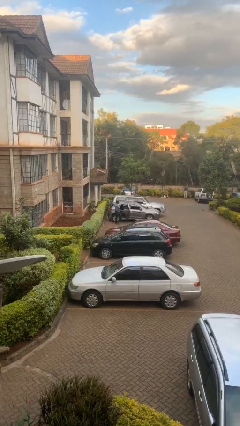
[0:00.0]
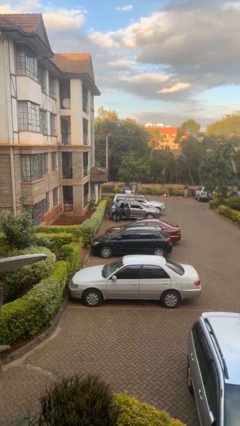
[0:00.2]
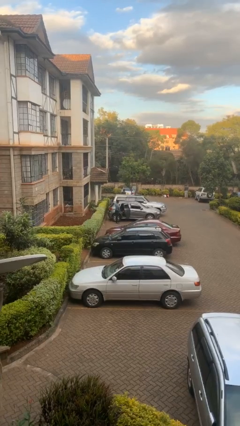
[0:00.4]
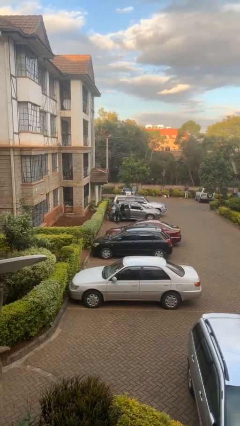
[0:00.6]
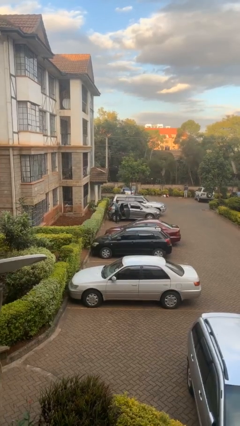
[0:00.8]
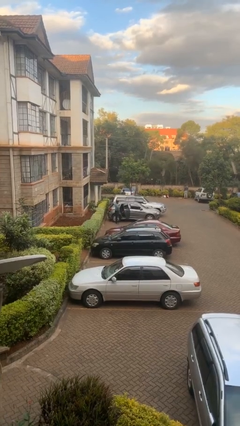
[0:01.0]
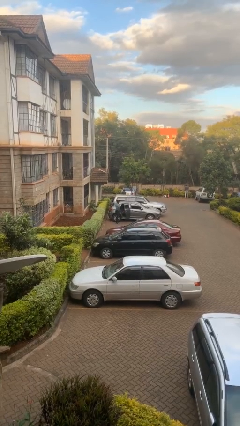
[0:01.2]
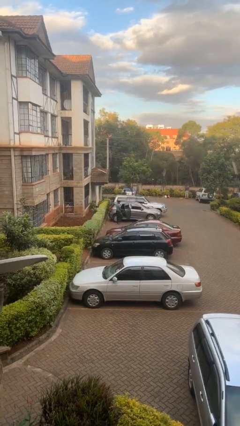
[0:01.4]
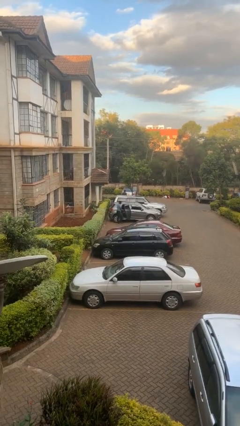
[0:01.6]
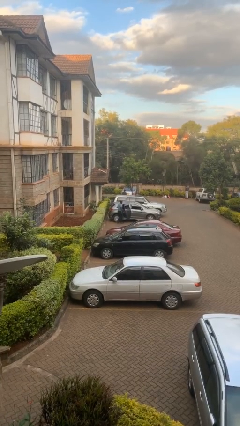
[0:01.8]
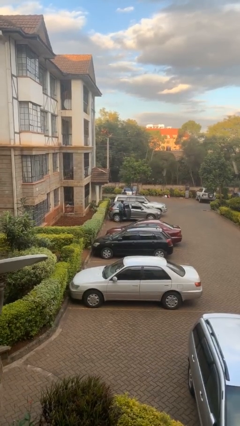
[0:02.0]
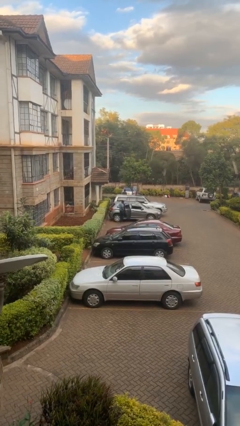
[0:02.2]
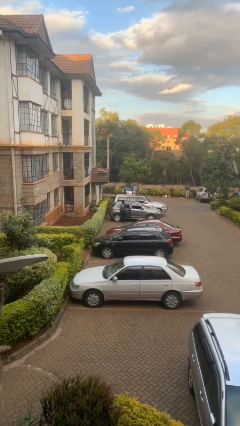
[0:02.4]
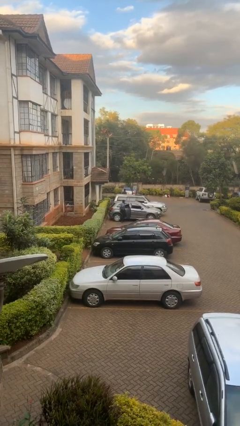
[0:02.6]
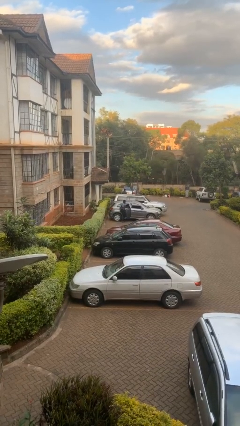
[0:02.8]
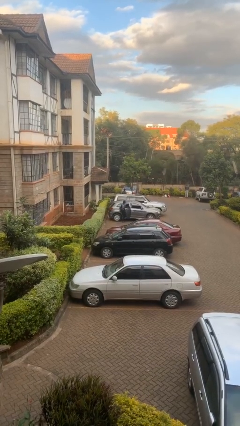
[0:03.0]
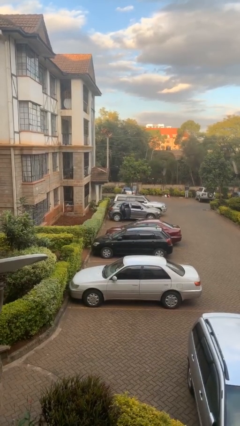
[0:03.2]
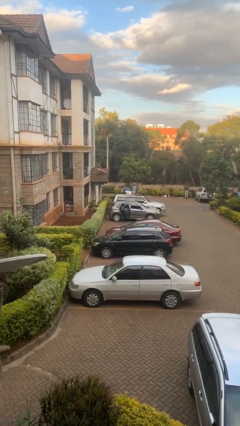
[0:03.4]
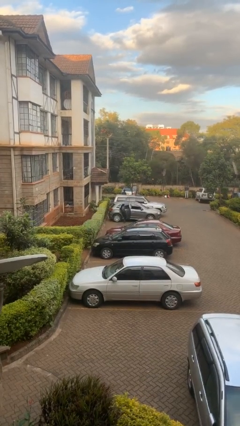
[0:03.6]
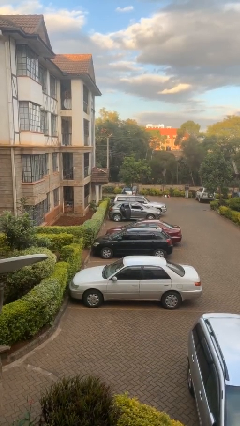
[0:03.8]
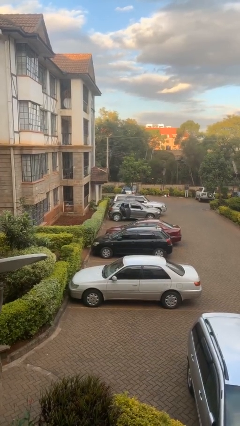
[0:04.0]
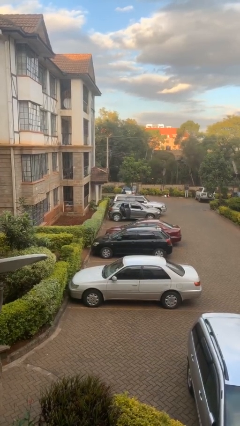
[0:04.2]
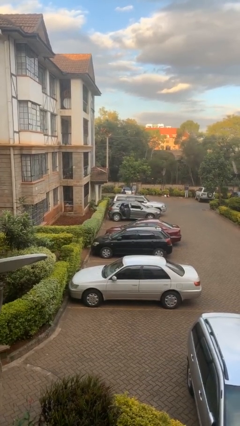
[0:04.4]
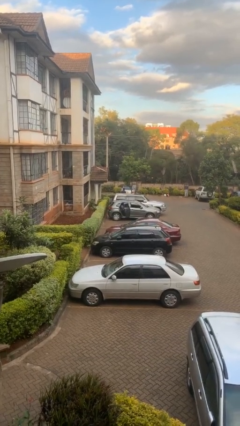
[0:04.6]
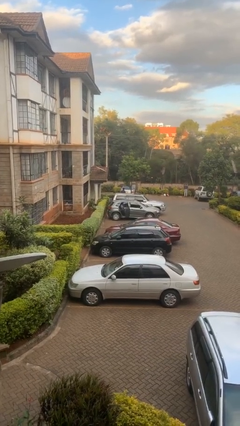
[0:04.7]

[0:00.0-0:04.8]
person enters car

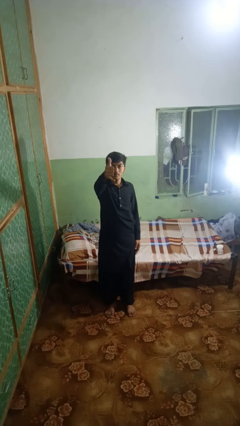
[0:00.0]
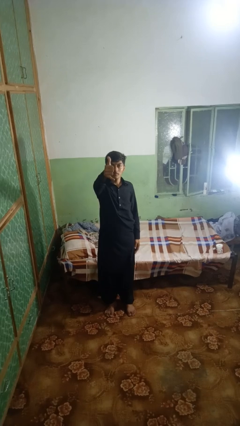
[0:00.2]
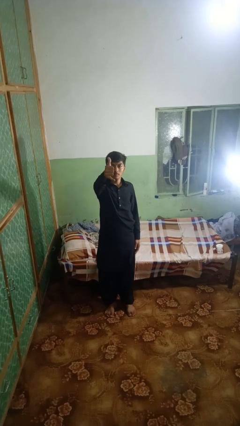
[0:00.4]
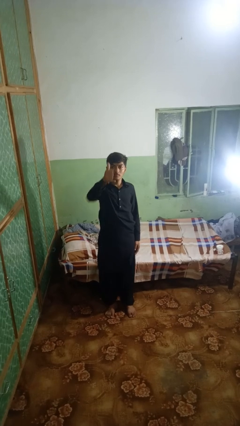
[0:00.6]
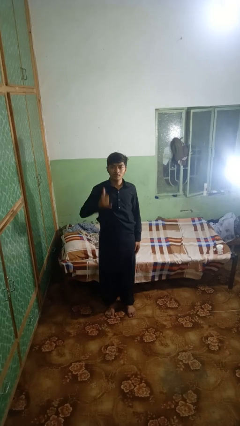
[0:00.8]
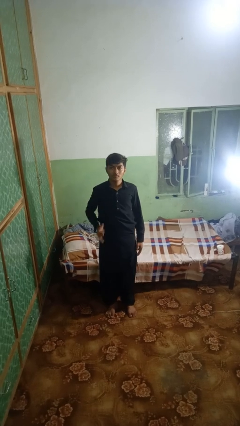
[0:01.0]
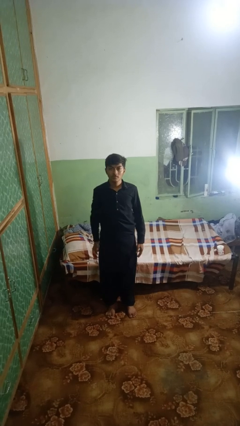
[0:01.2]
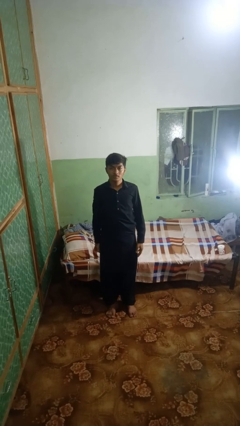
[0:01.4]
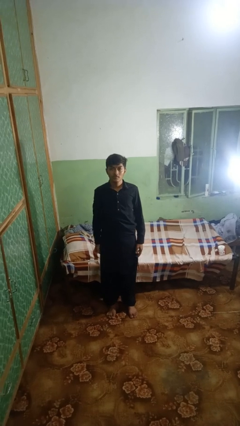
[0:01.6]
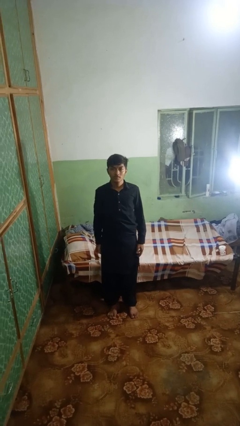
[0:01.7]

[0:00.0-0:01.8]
person gestures hang loose

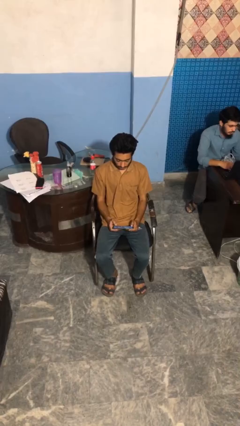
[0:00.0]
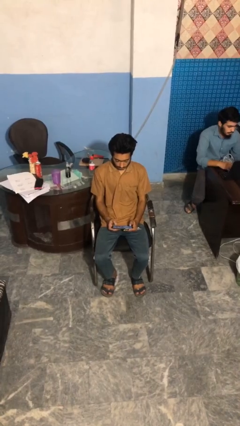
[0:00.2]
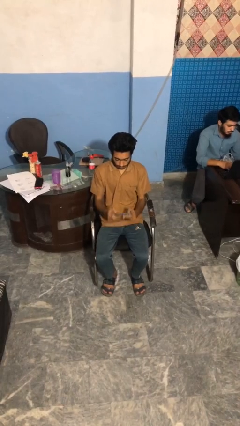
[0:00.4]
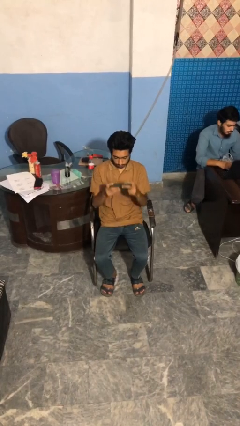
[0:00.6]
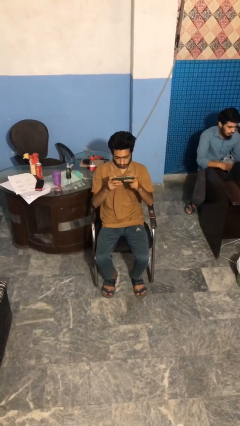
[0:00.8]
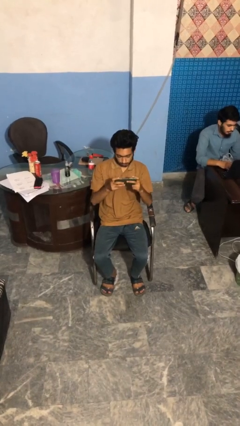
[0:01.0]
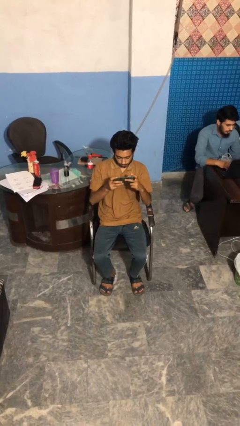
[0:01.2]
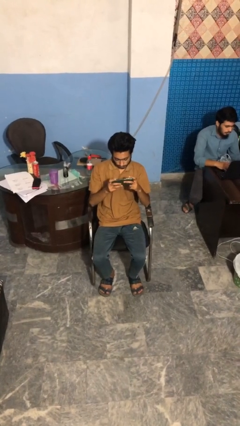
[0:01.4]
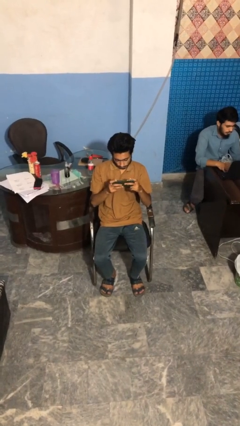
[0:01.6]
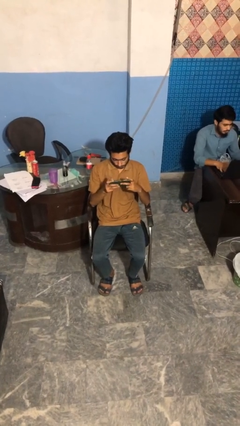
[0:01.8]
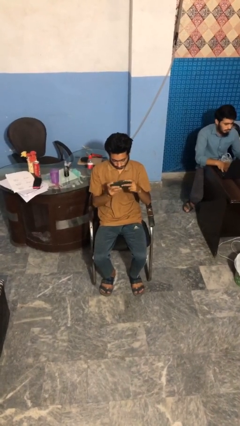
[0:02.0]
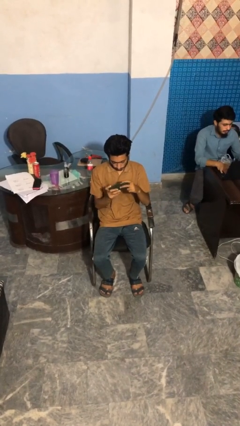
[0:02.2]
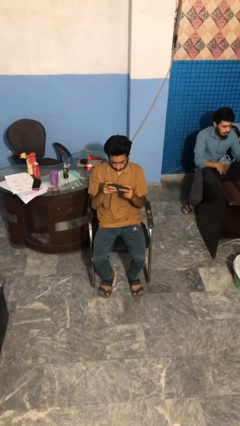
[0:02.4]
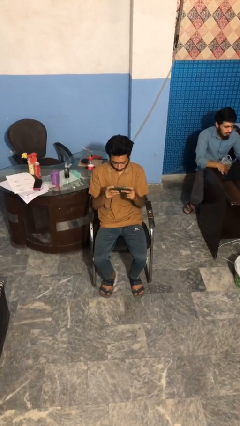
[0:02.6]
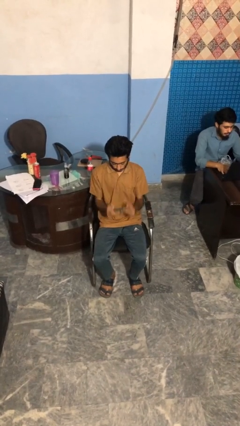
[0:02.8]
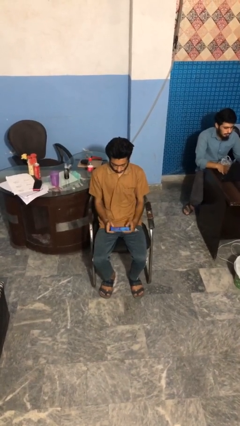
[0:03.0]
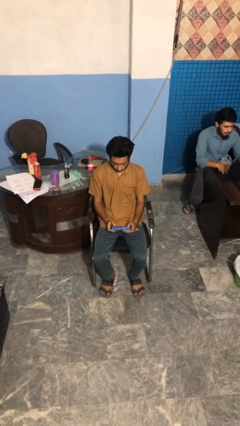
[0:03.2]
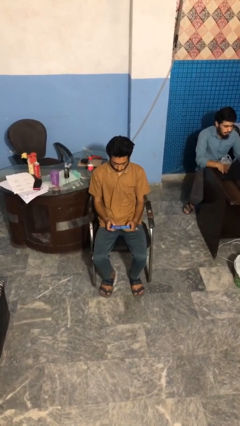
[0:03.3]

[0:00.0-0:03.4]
person interacts with handheld game

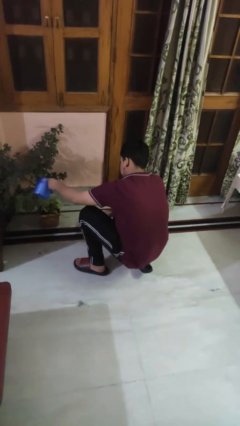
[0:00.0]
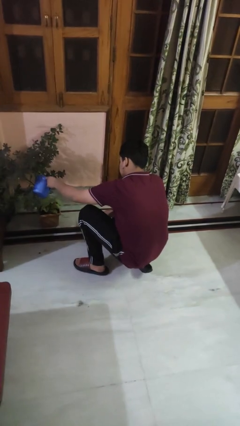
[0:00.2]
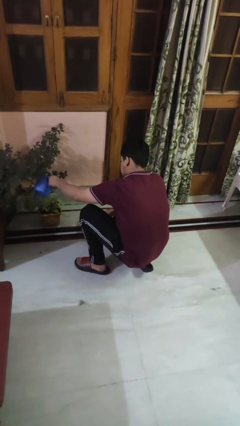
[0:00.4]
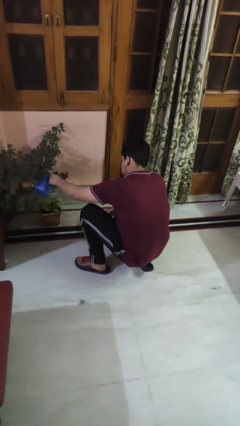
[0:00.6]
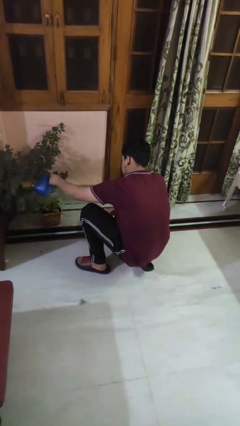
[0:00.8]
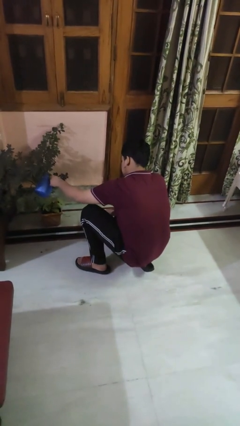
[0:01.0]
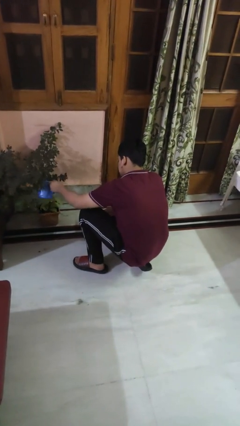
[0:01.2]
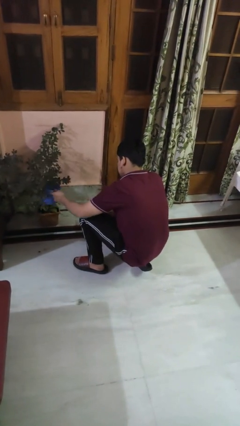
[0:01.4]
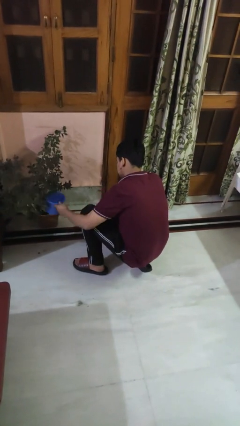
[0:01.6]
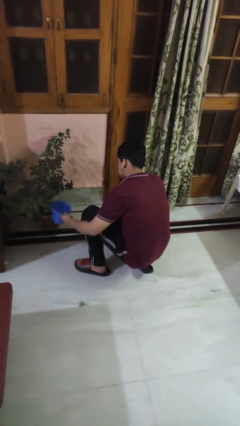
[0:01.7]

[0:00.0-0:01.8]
person waters houseplant

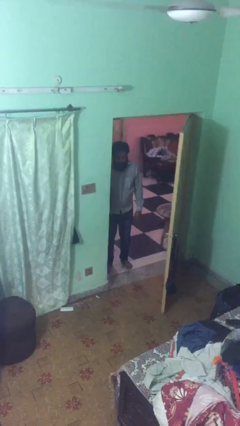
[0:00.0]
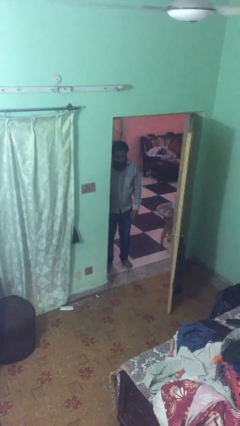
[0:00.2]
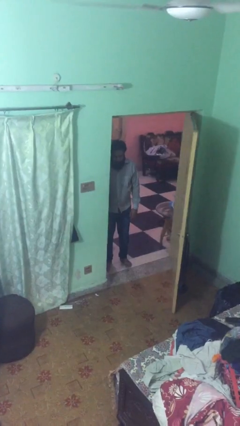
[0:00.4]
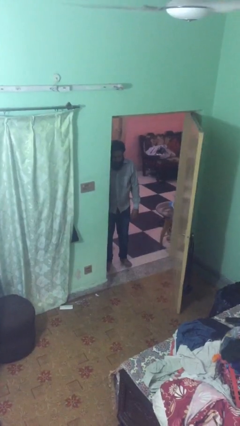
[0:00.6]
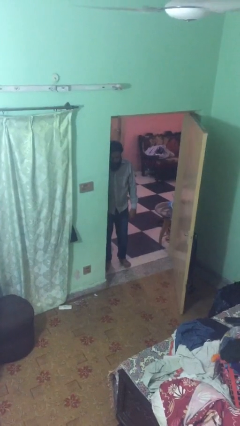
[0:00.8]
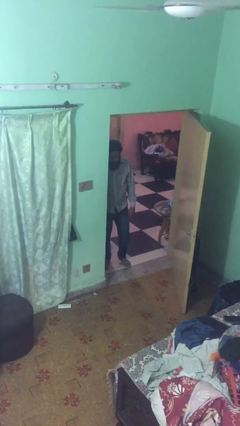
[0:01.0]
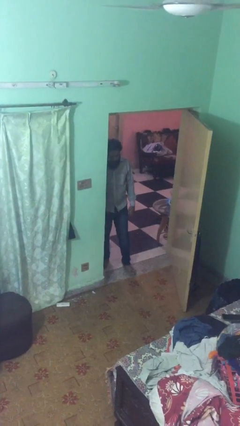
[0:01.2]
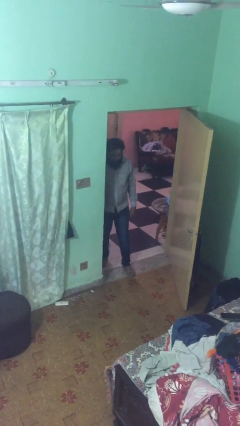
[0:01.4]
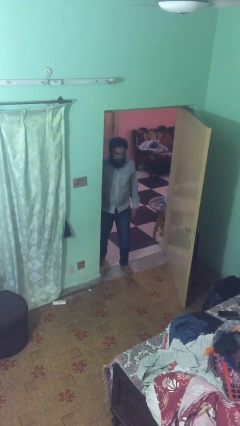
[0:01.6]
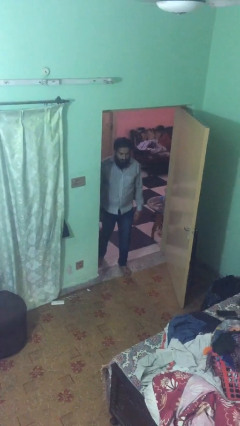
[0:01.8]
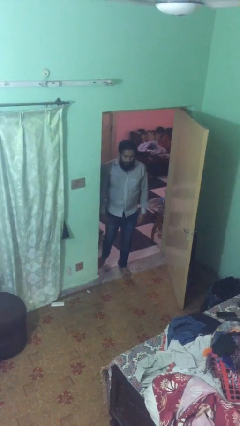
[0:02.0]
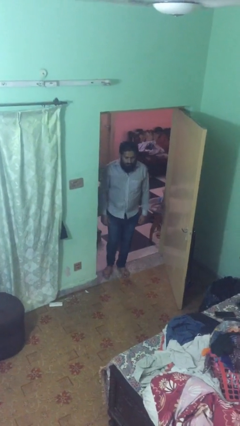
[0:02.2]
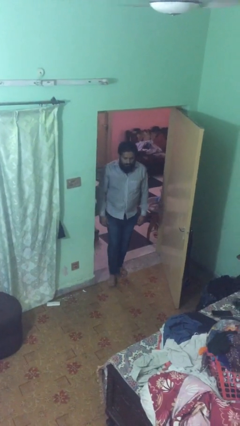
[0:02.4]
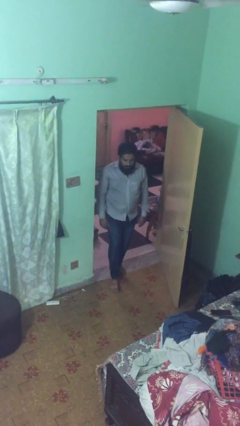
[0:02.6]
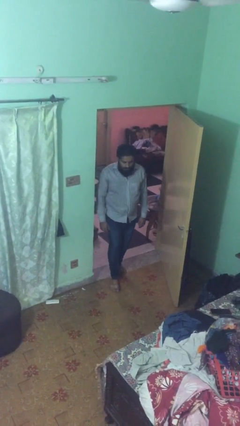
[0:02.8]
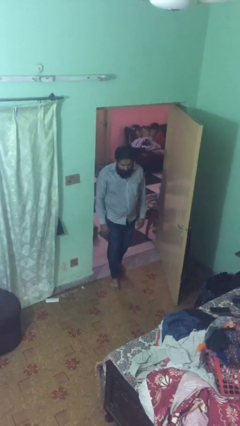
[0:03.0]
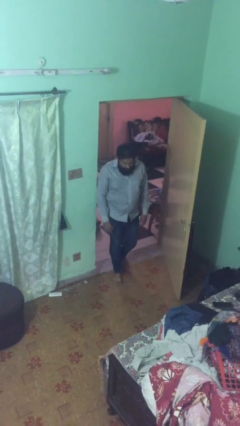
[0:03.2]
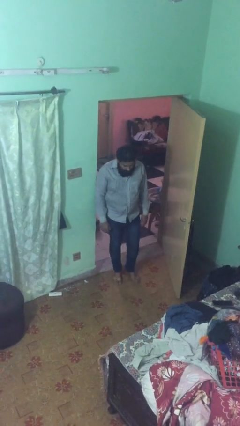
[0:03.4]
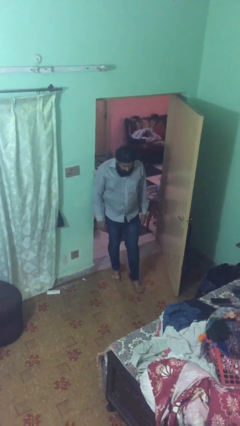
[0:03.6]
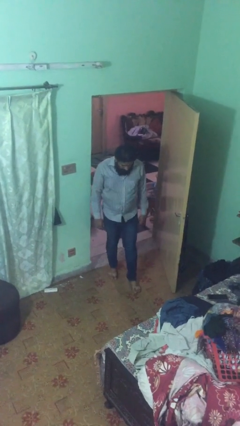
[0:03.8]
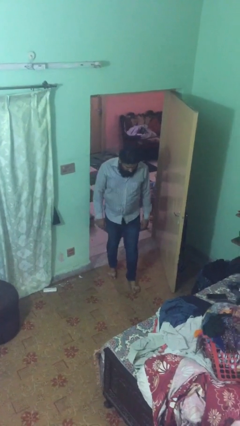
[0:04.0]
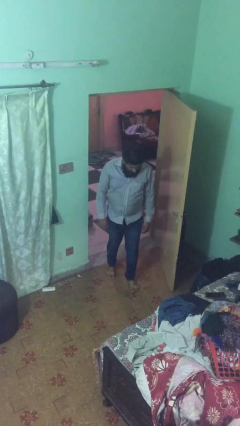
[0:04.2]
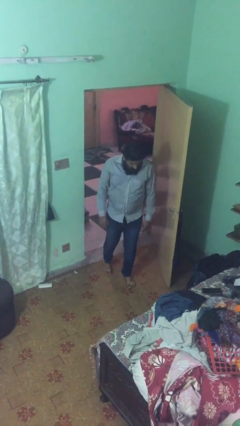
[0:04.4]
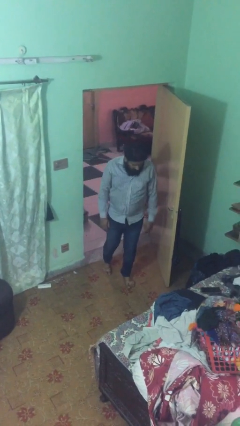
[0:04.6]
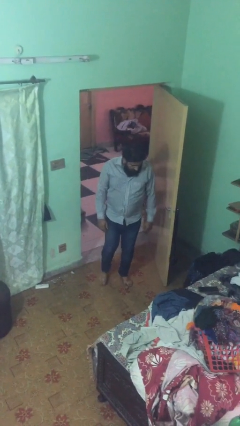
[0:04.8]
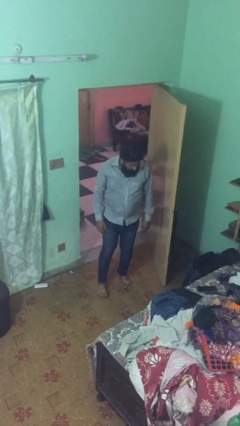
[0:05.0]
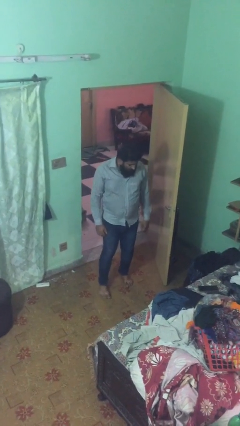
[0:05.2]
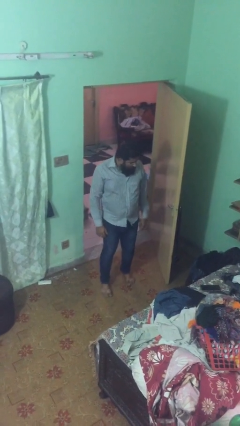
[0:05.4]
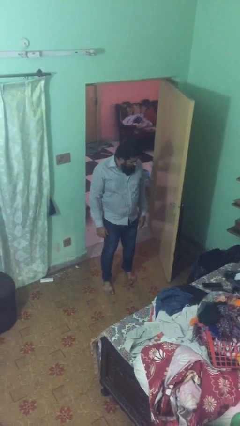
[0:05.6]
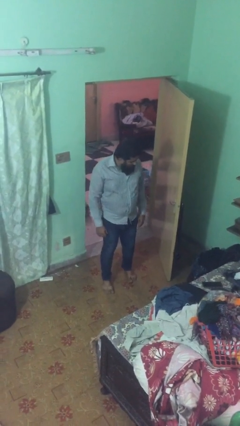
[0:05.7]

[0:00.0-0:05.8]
person enters scene through structure

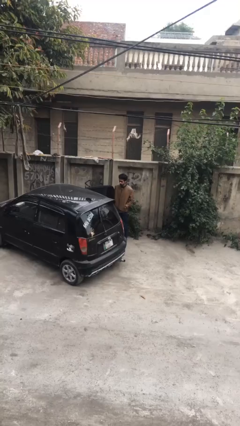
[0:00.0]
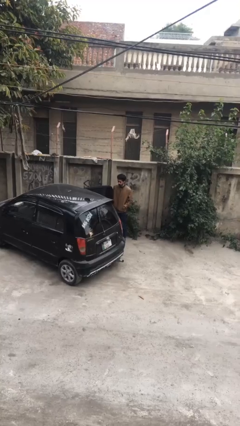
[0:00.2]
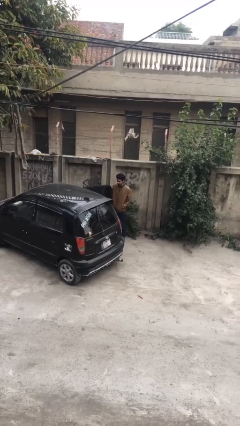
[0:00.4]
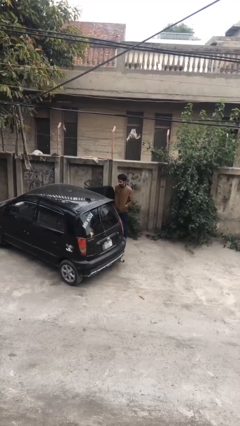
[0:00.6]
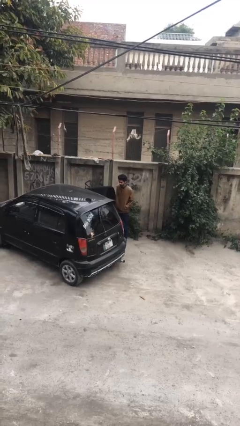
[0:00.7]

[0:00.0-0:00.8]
person closes car door
